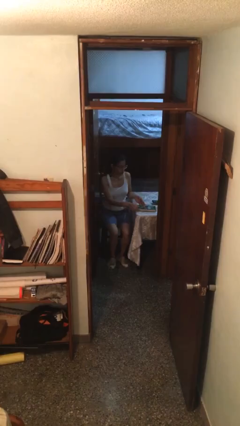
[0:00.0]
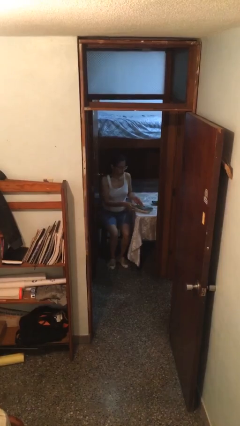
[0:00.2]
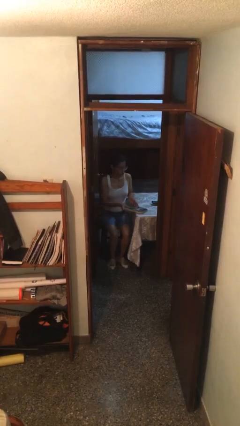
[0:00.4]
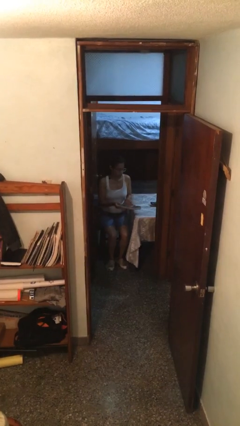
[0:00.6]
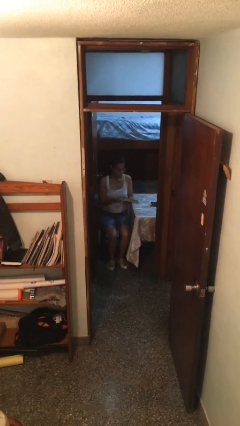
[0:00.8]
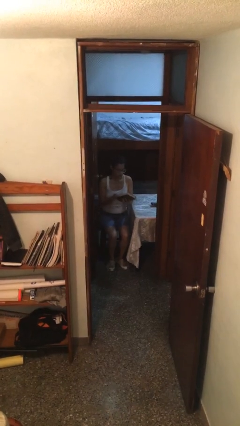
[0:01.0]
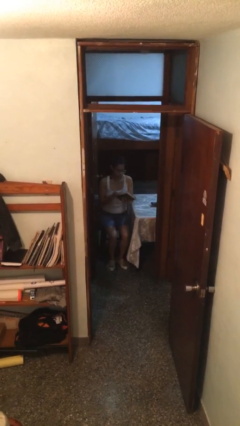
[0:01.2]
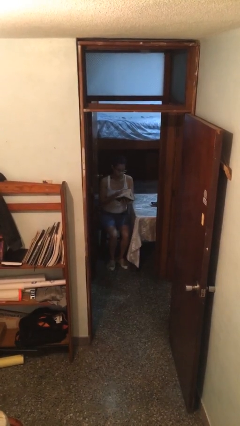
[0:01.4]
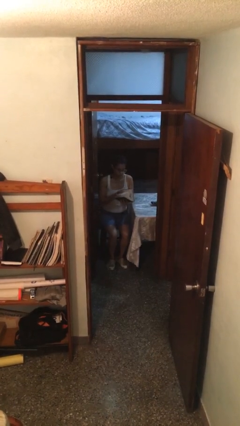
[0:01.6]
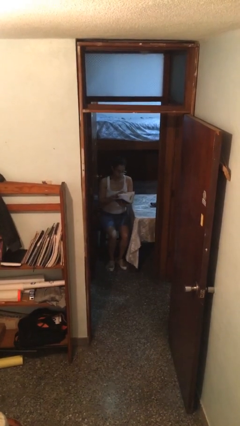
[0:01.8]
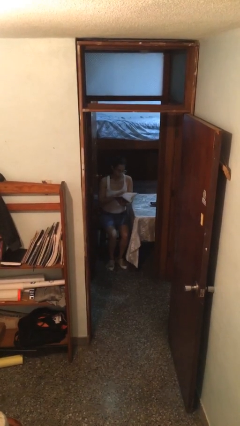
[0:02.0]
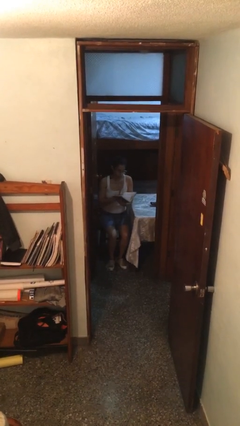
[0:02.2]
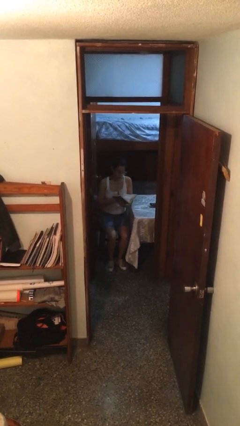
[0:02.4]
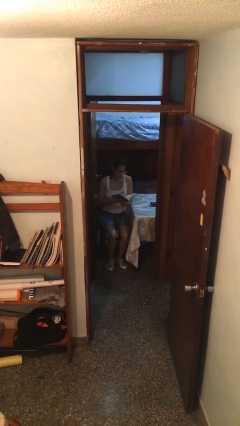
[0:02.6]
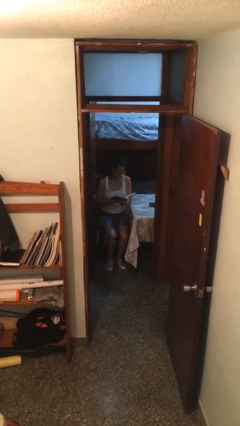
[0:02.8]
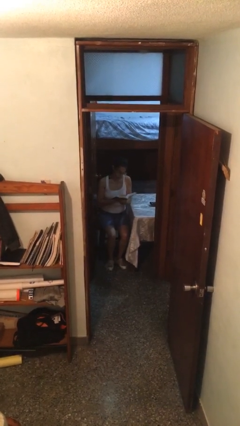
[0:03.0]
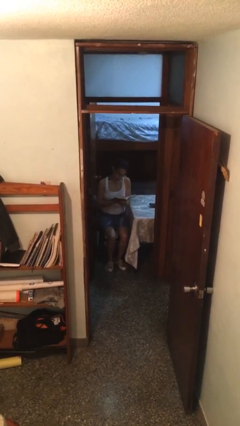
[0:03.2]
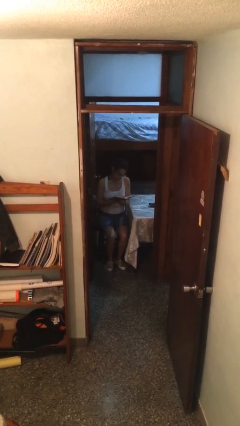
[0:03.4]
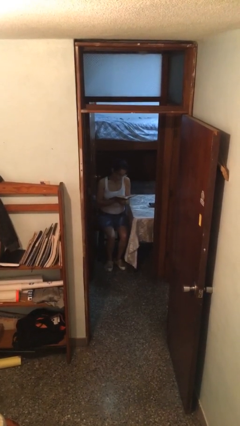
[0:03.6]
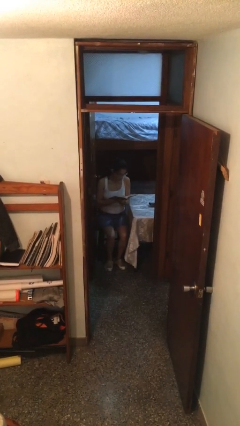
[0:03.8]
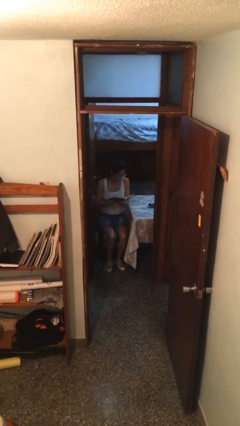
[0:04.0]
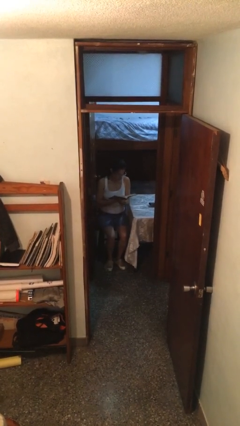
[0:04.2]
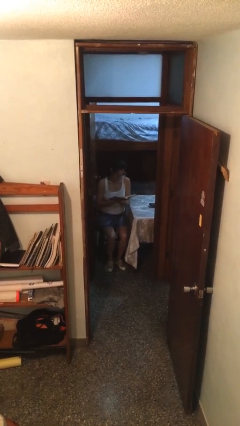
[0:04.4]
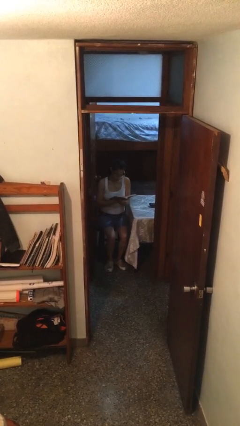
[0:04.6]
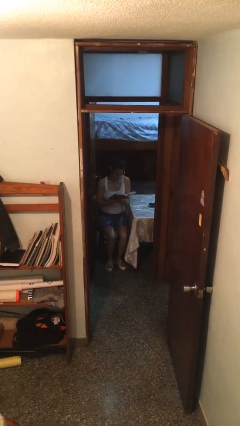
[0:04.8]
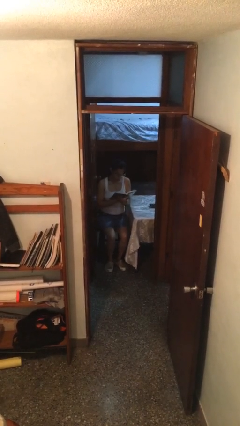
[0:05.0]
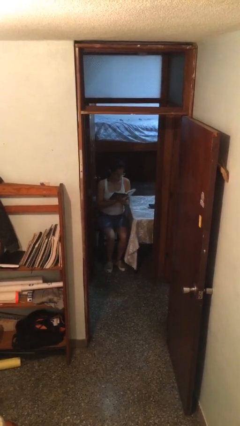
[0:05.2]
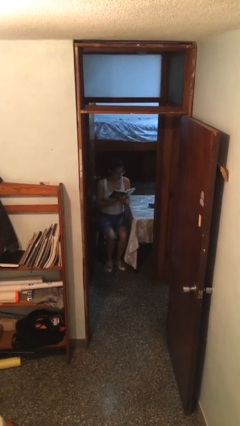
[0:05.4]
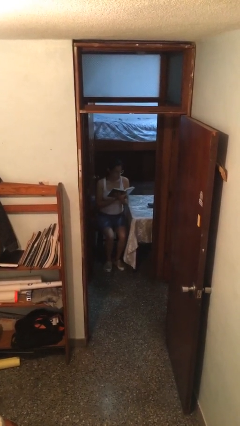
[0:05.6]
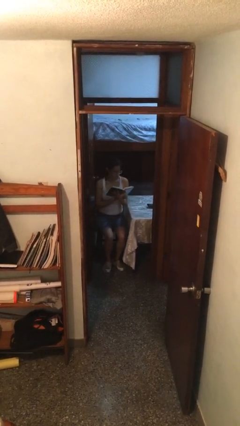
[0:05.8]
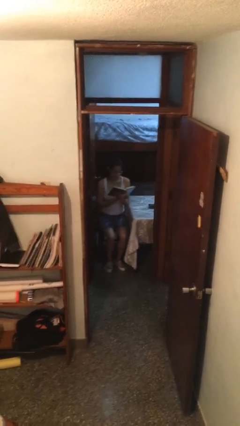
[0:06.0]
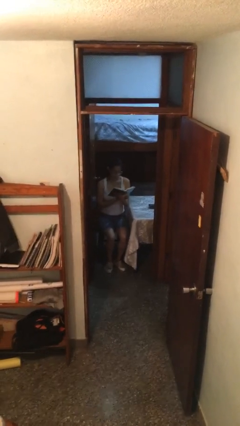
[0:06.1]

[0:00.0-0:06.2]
person reads document

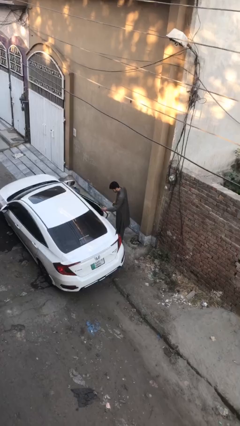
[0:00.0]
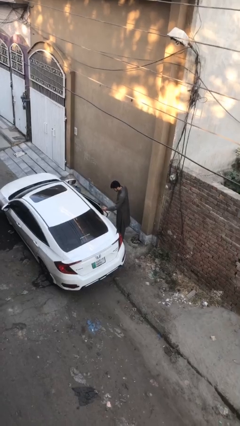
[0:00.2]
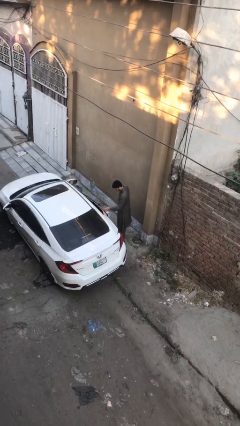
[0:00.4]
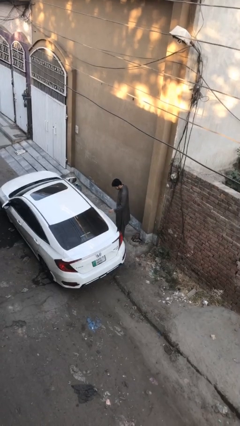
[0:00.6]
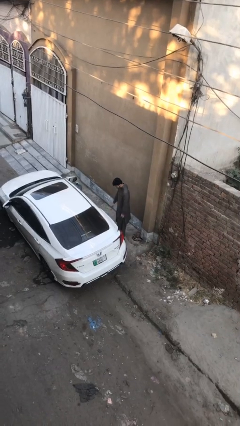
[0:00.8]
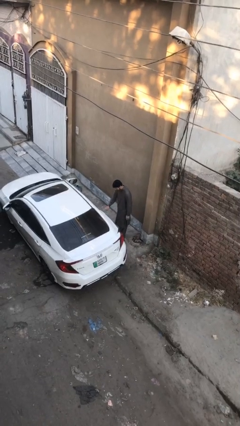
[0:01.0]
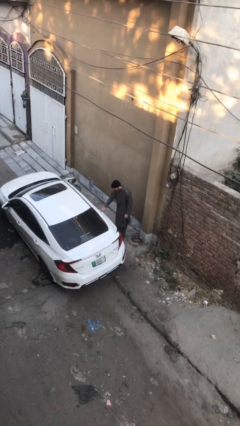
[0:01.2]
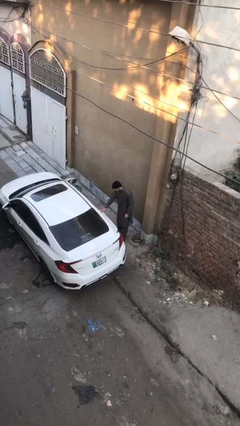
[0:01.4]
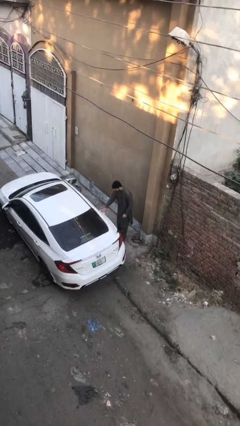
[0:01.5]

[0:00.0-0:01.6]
person closes car door

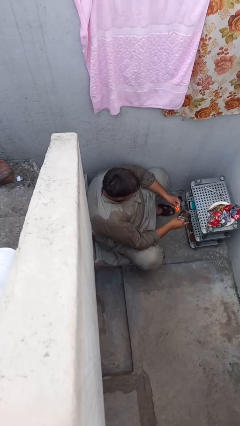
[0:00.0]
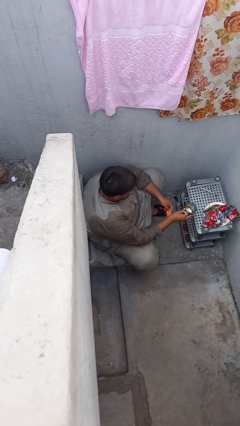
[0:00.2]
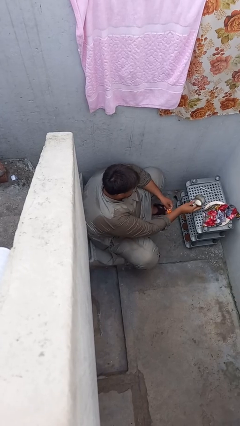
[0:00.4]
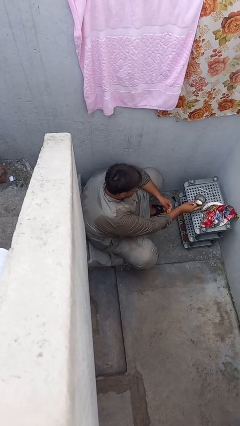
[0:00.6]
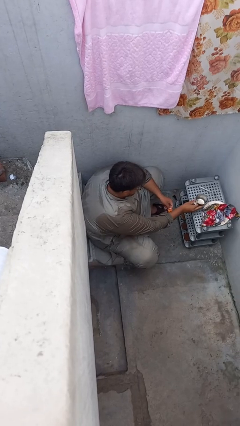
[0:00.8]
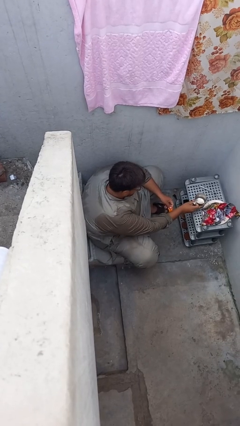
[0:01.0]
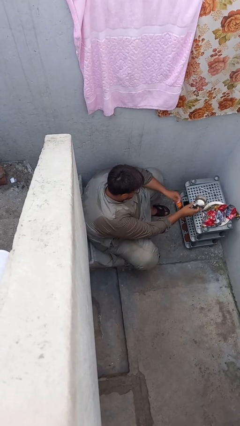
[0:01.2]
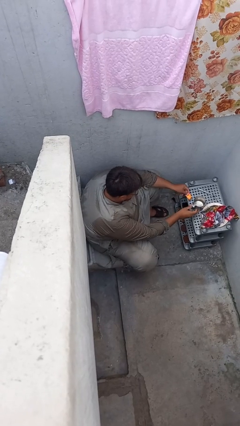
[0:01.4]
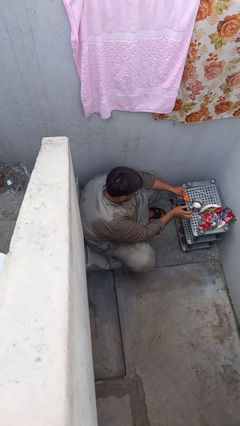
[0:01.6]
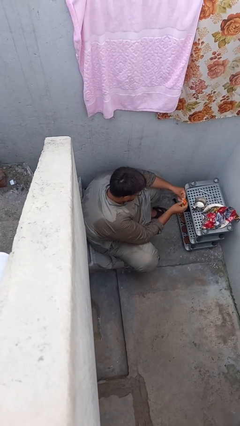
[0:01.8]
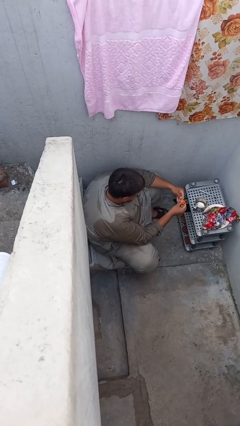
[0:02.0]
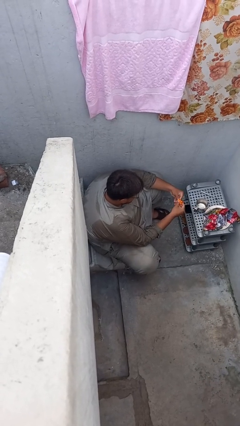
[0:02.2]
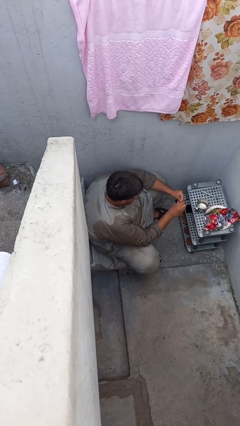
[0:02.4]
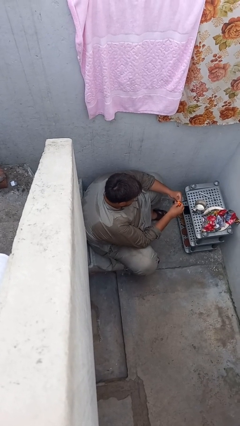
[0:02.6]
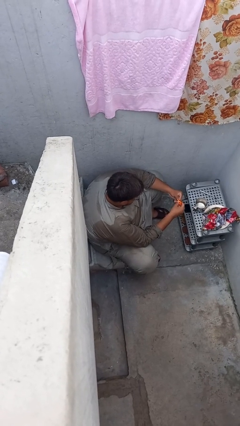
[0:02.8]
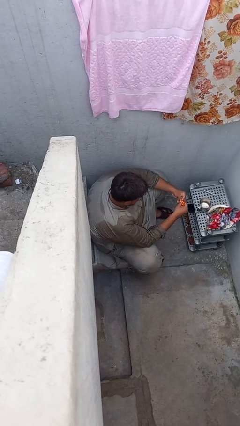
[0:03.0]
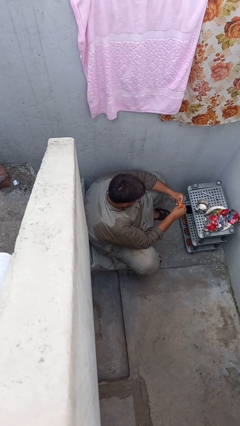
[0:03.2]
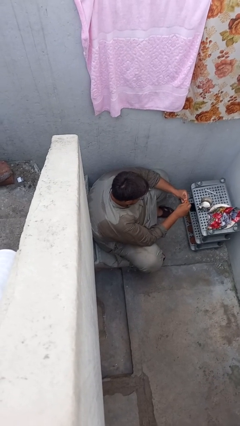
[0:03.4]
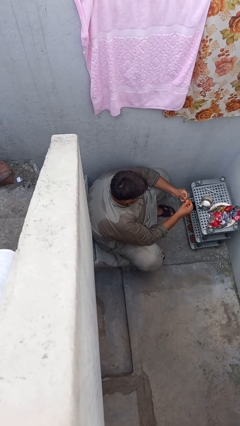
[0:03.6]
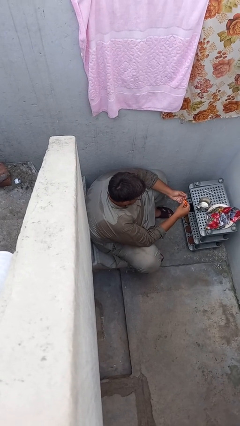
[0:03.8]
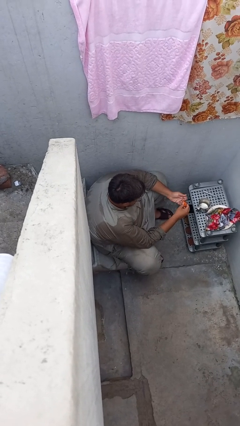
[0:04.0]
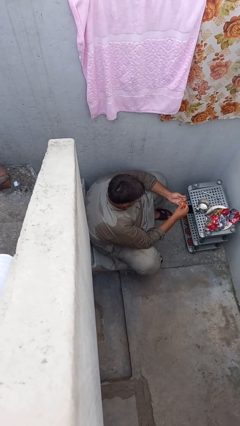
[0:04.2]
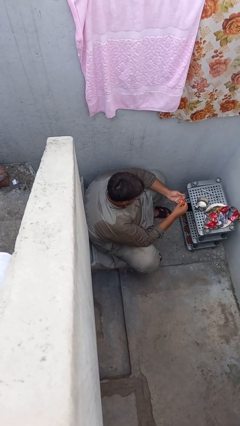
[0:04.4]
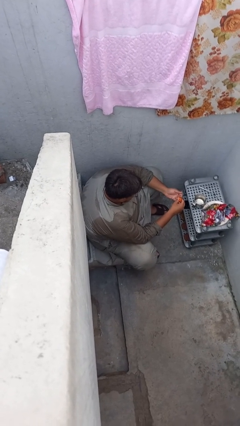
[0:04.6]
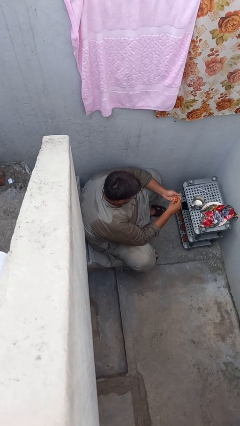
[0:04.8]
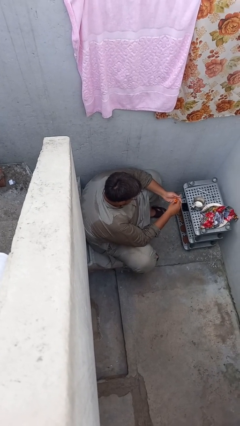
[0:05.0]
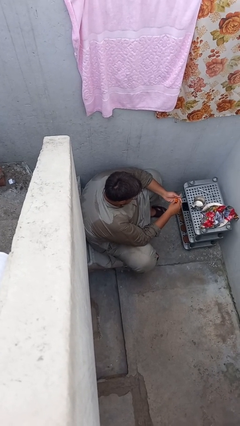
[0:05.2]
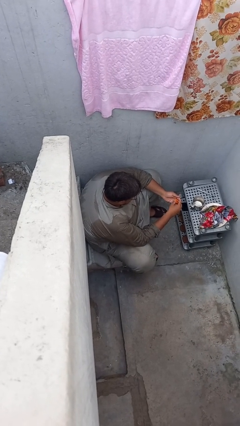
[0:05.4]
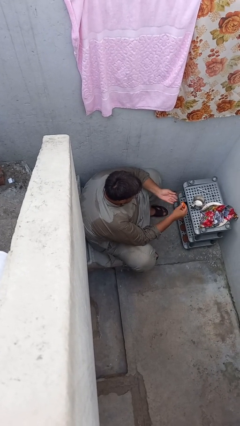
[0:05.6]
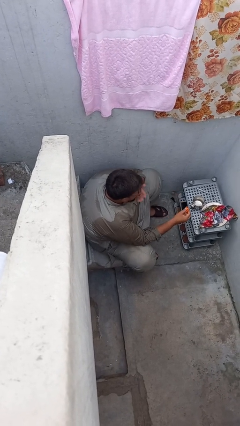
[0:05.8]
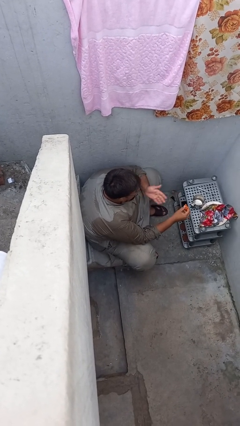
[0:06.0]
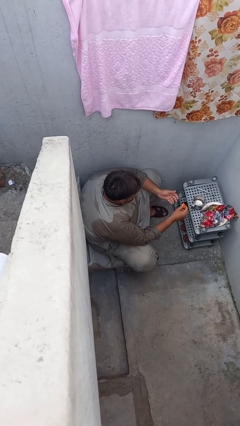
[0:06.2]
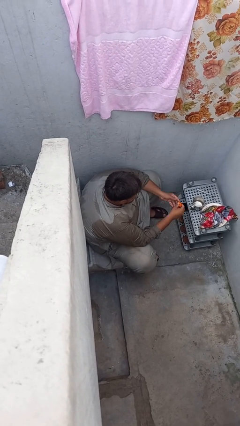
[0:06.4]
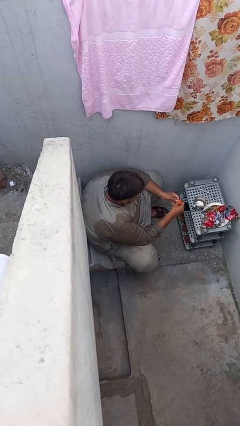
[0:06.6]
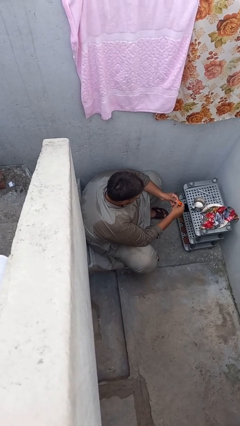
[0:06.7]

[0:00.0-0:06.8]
person takes medicine pills

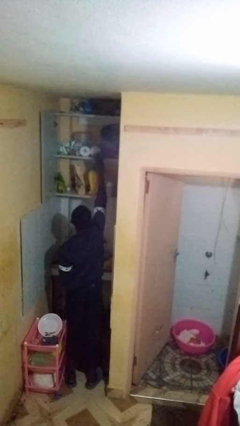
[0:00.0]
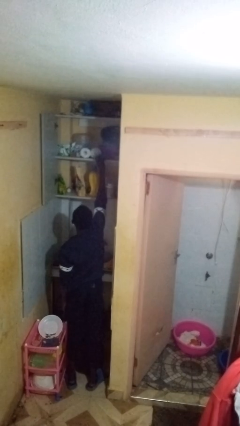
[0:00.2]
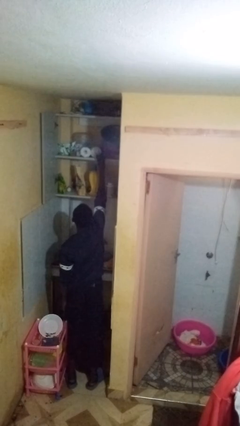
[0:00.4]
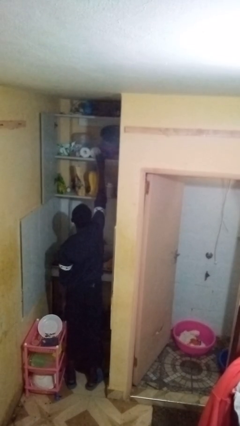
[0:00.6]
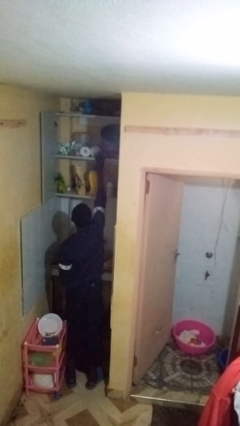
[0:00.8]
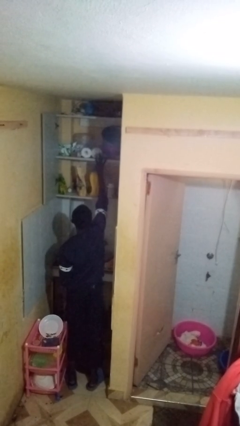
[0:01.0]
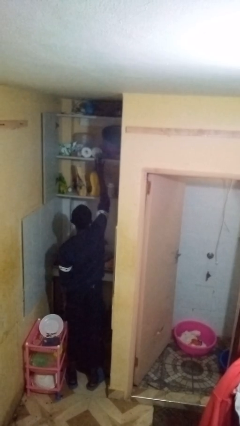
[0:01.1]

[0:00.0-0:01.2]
person puts object in cabinet

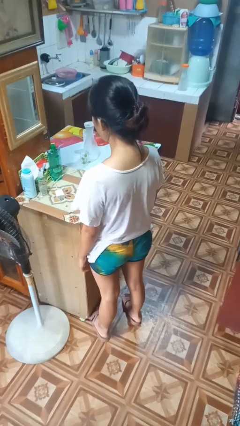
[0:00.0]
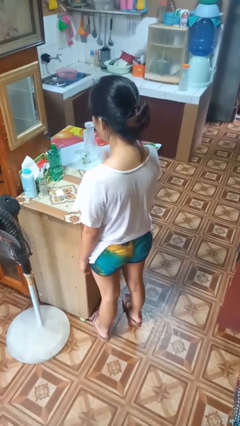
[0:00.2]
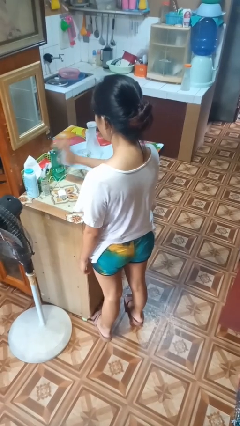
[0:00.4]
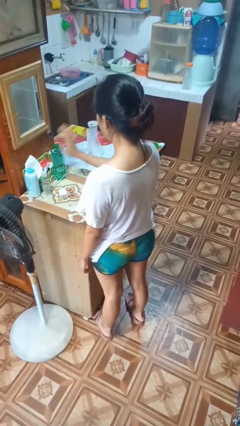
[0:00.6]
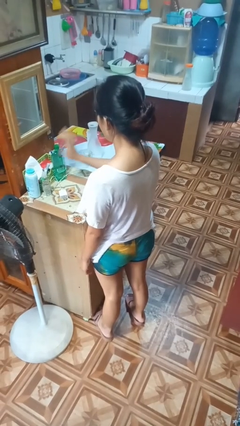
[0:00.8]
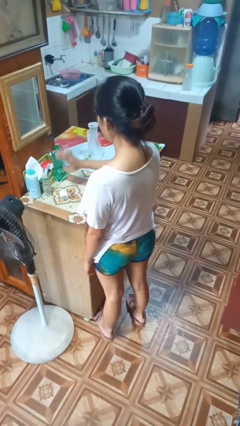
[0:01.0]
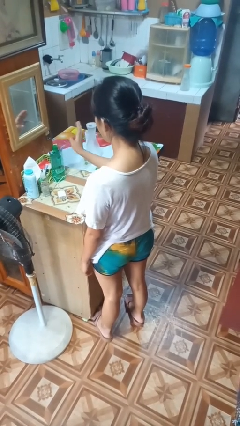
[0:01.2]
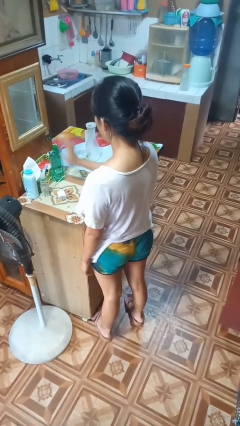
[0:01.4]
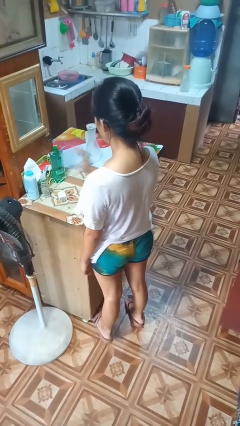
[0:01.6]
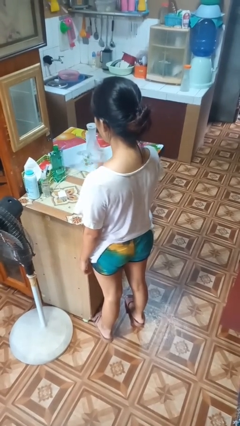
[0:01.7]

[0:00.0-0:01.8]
person waves hand over object
